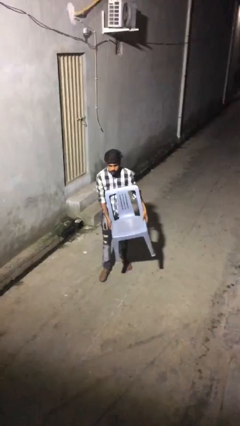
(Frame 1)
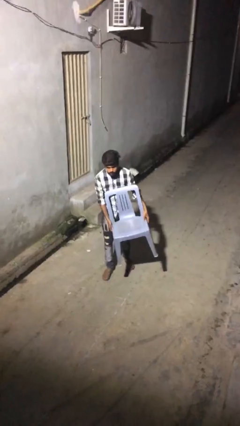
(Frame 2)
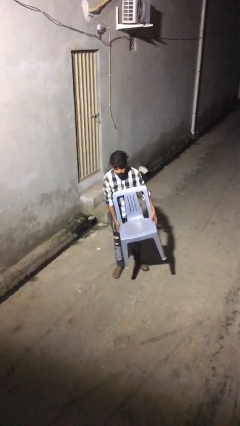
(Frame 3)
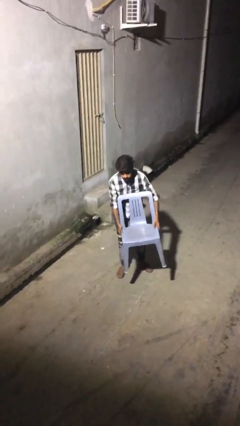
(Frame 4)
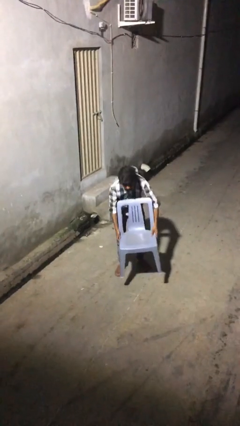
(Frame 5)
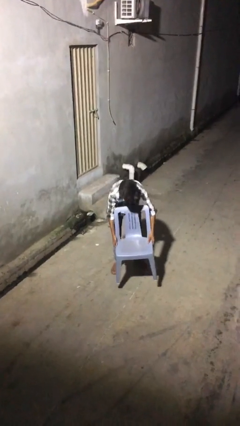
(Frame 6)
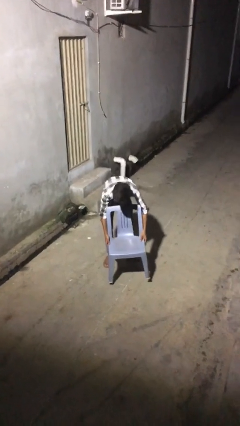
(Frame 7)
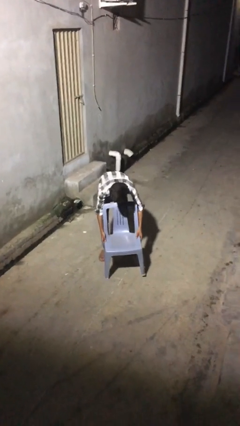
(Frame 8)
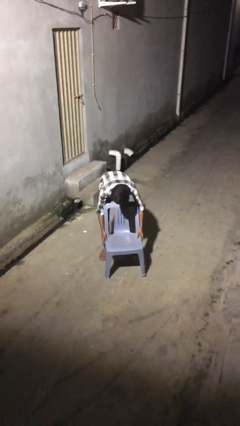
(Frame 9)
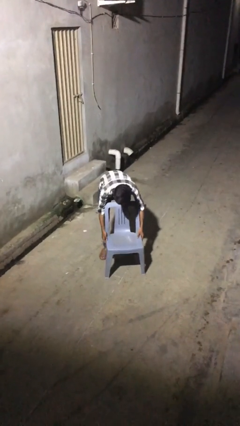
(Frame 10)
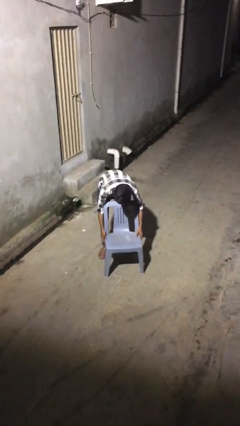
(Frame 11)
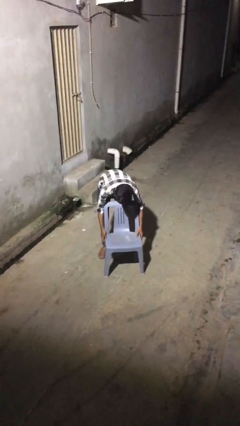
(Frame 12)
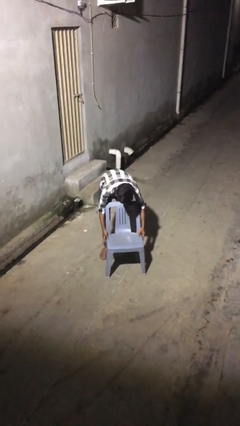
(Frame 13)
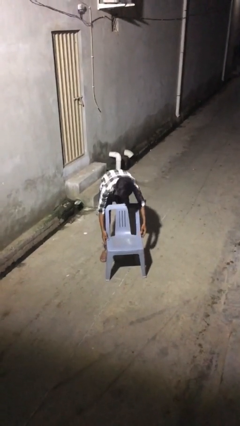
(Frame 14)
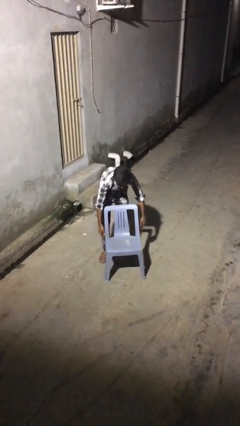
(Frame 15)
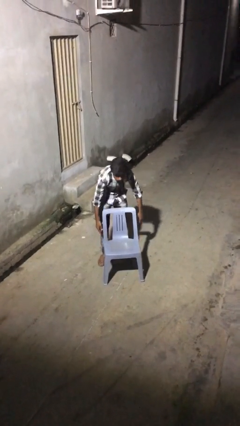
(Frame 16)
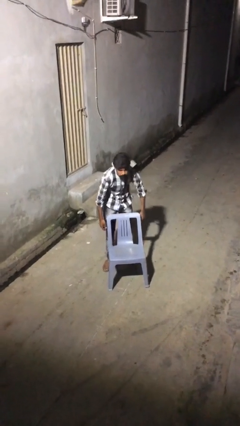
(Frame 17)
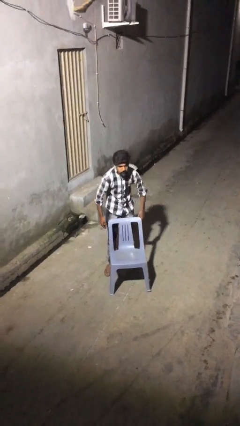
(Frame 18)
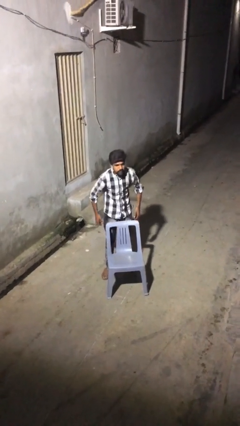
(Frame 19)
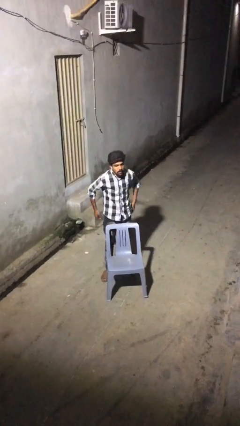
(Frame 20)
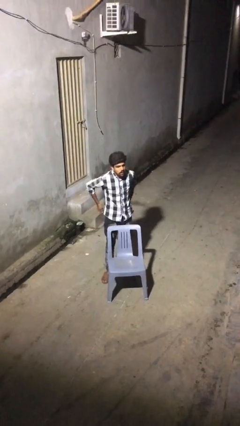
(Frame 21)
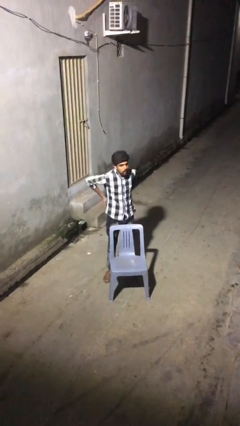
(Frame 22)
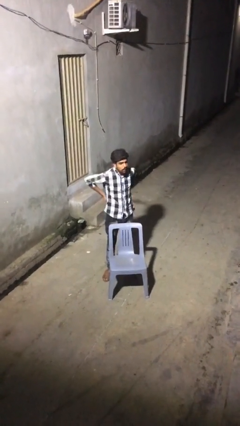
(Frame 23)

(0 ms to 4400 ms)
person puts down object on floor

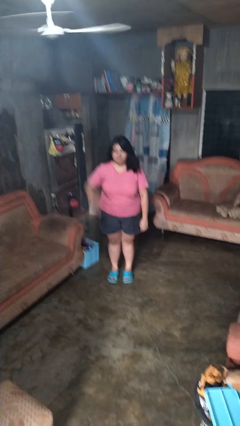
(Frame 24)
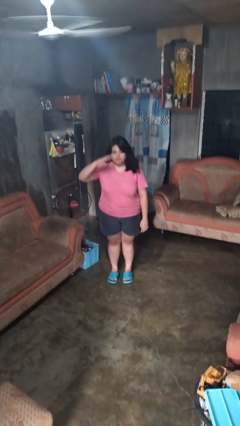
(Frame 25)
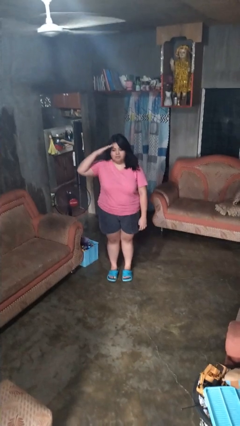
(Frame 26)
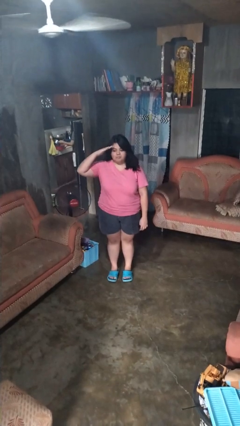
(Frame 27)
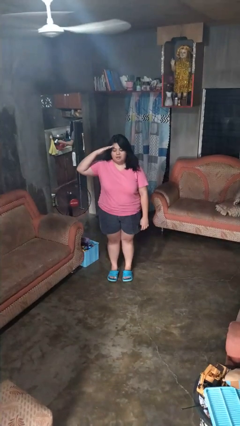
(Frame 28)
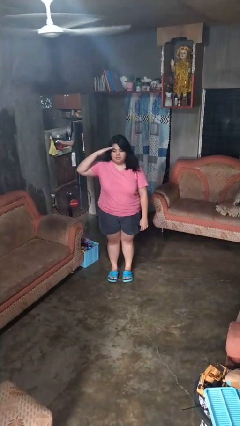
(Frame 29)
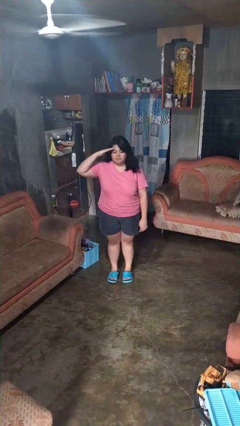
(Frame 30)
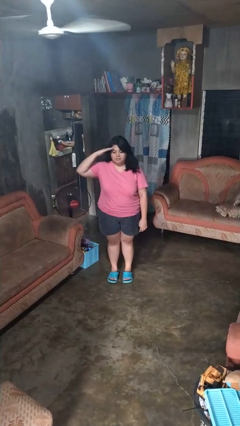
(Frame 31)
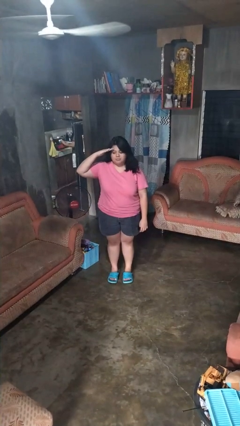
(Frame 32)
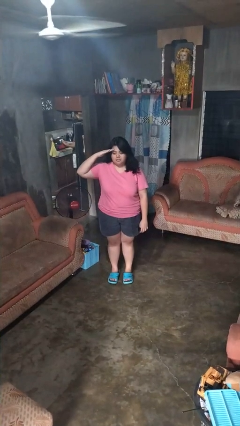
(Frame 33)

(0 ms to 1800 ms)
person salutes

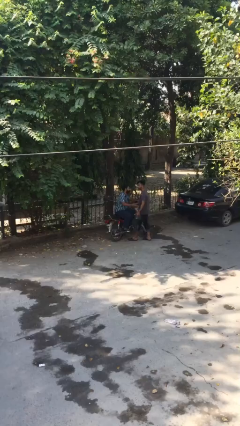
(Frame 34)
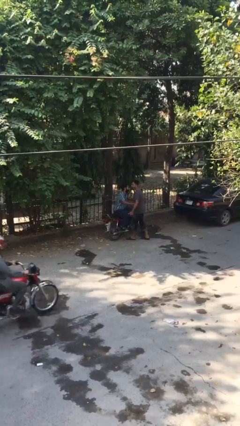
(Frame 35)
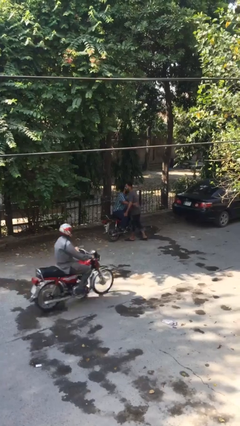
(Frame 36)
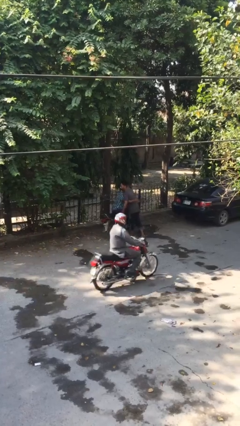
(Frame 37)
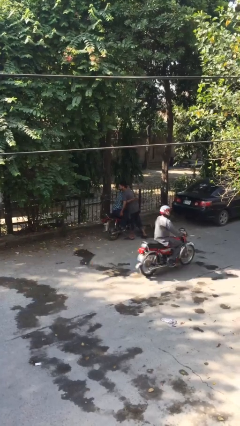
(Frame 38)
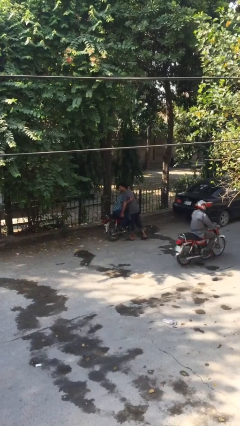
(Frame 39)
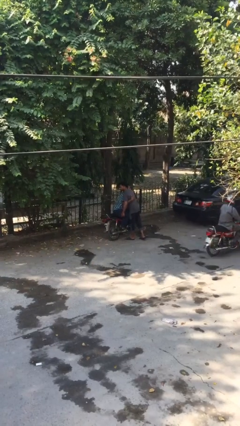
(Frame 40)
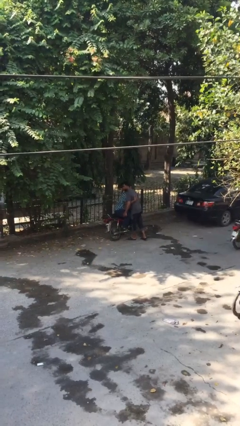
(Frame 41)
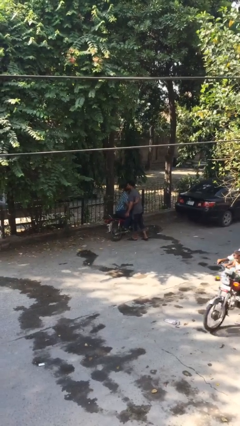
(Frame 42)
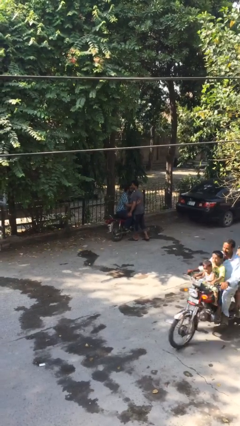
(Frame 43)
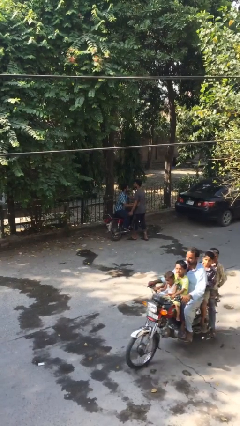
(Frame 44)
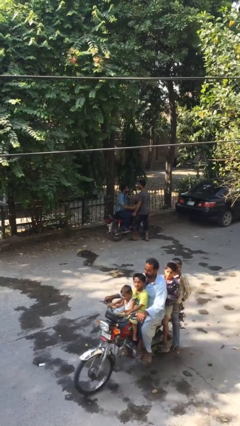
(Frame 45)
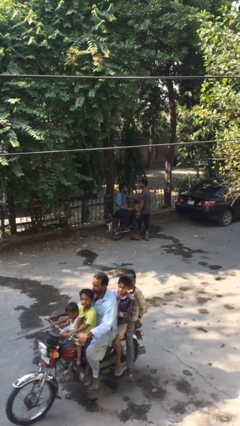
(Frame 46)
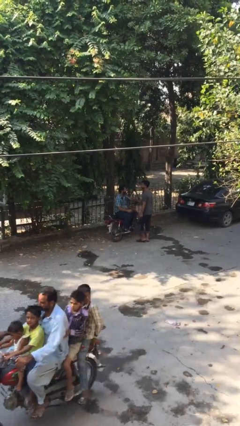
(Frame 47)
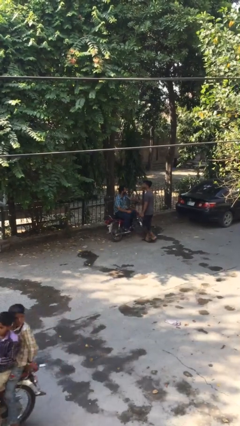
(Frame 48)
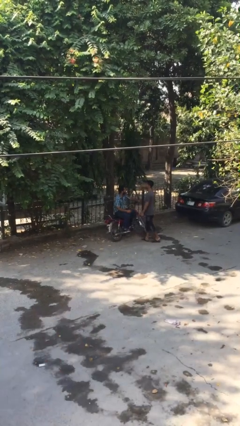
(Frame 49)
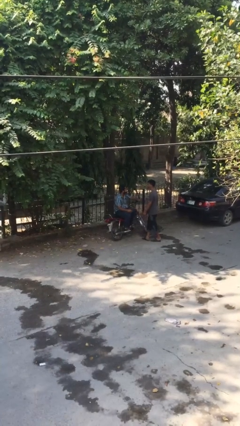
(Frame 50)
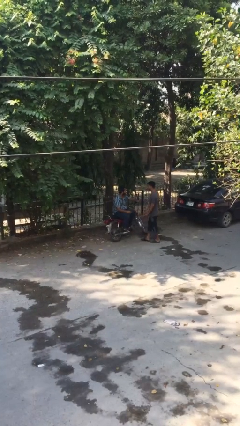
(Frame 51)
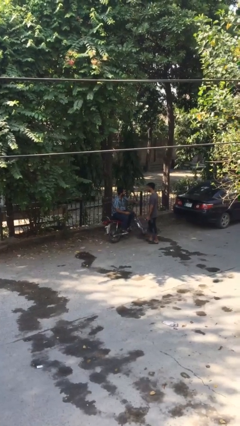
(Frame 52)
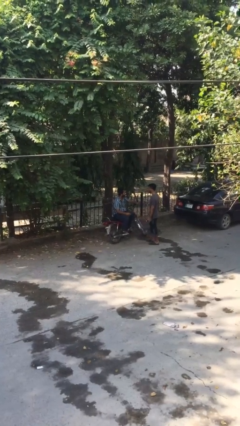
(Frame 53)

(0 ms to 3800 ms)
person embraces person

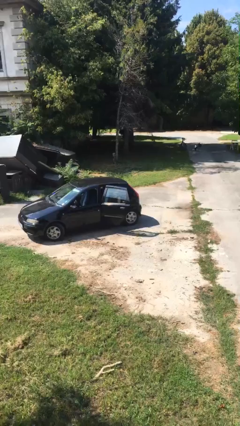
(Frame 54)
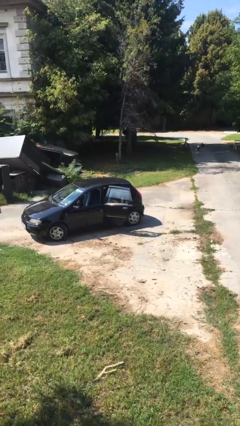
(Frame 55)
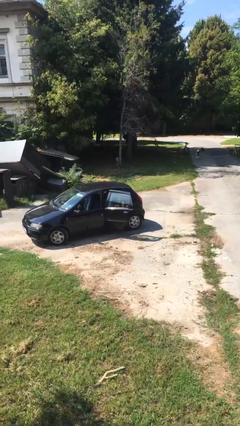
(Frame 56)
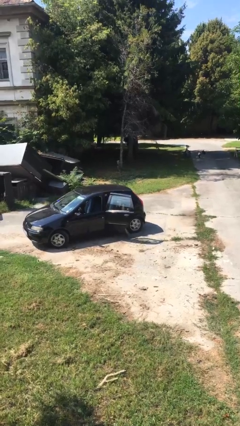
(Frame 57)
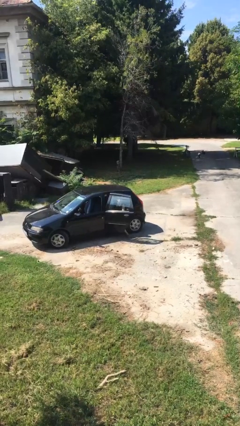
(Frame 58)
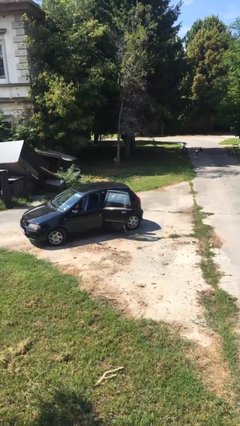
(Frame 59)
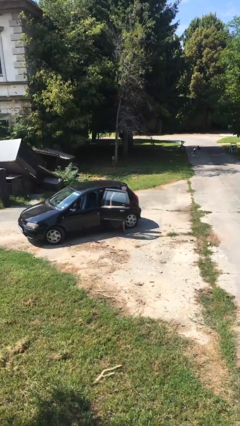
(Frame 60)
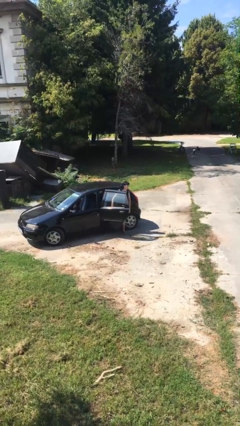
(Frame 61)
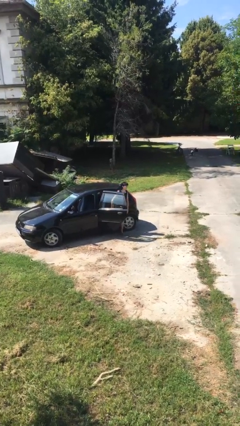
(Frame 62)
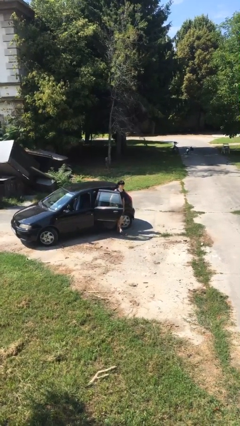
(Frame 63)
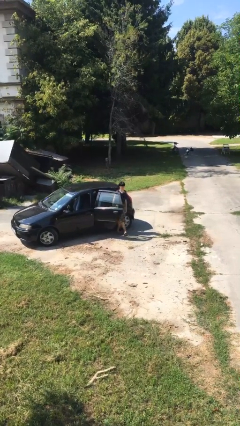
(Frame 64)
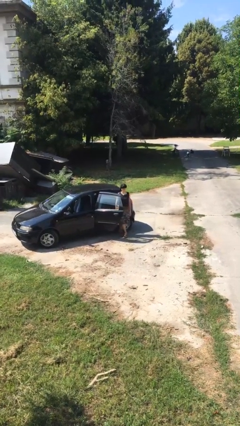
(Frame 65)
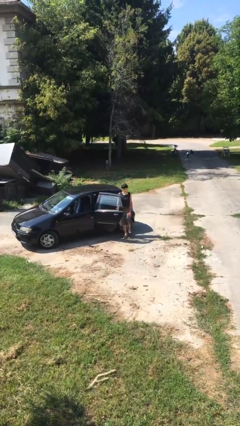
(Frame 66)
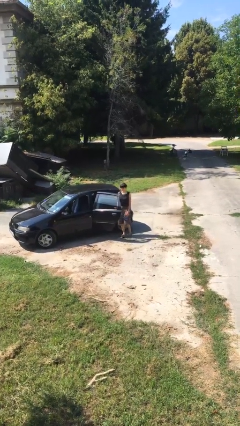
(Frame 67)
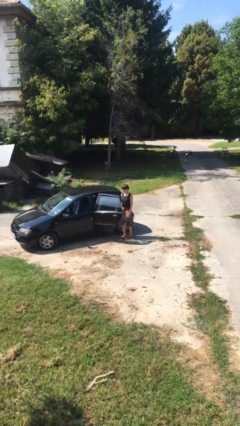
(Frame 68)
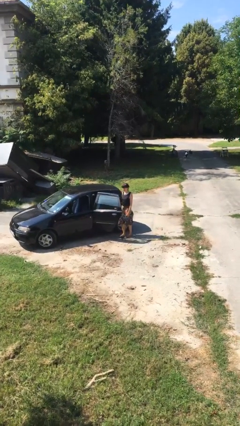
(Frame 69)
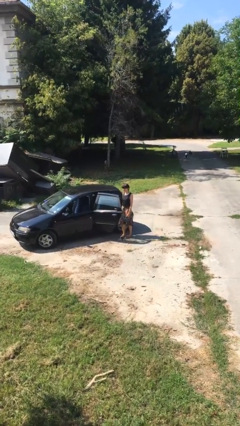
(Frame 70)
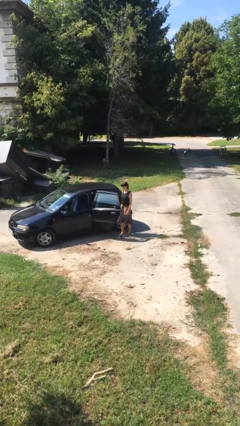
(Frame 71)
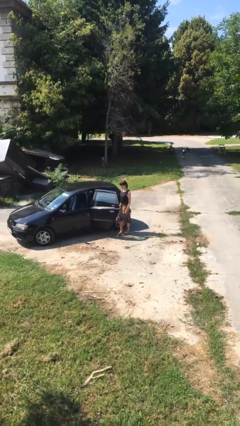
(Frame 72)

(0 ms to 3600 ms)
person exits car

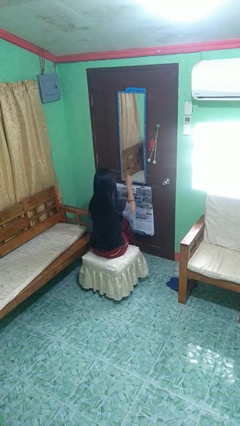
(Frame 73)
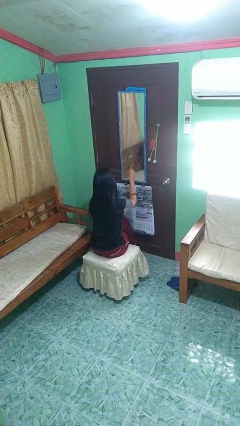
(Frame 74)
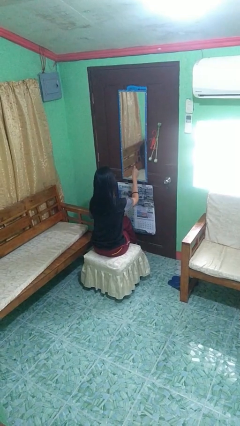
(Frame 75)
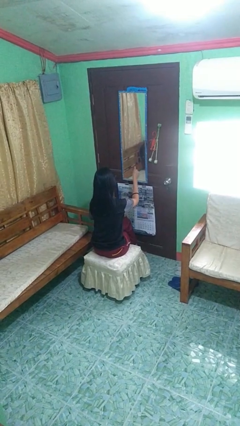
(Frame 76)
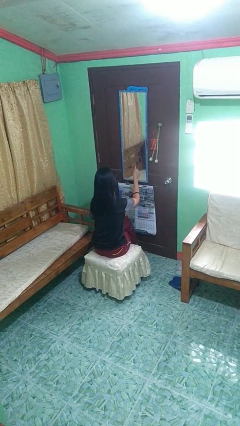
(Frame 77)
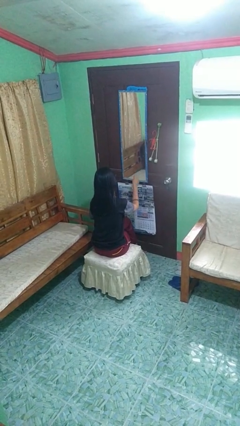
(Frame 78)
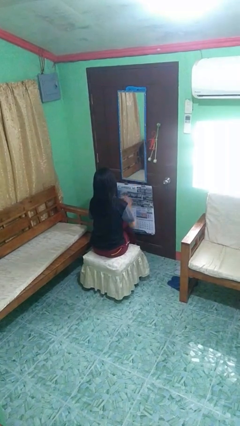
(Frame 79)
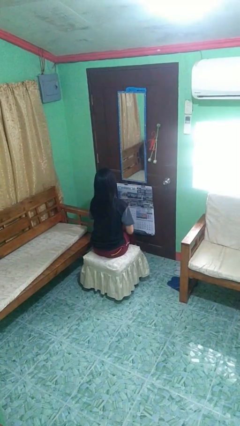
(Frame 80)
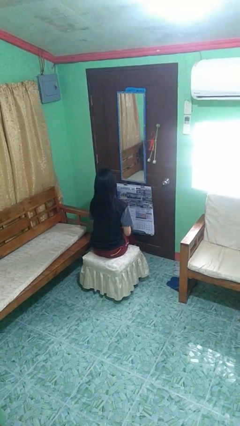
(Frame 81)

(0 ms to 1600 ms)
person gestures thumbs up

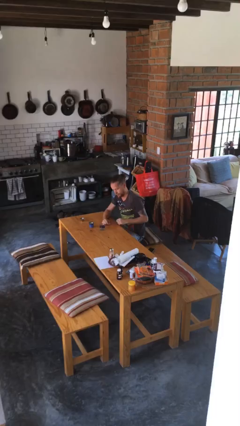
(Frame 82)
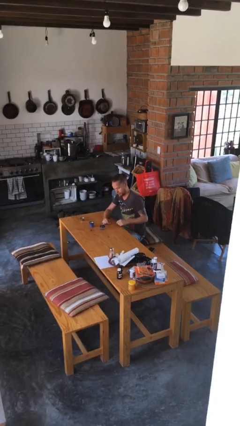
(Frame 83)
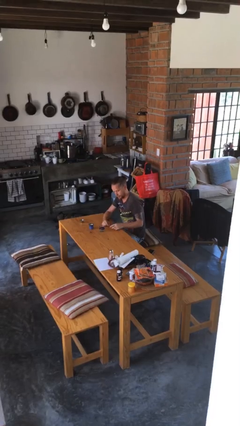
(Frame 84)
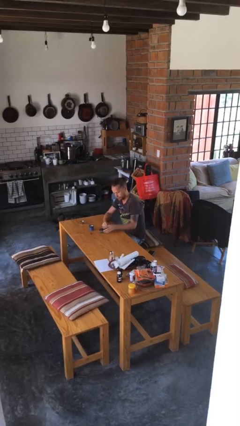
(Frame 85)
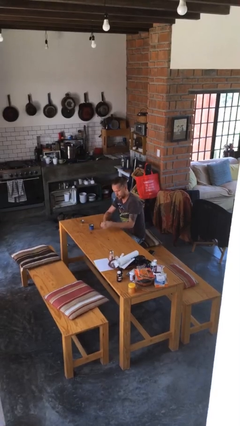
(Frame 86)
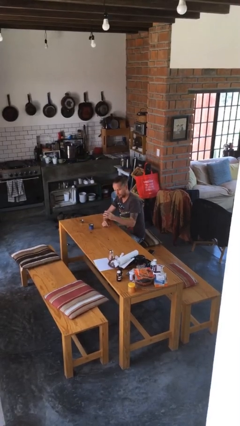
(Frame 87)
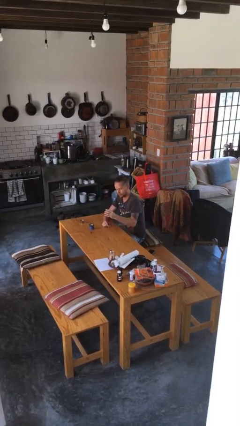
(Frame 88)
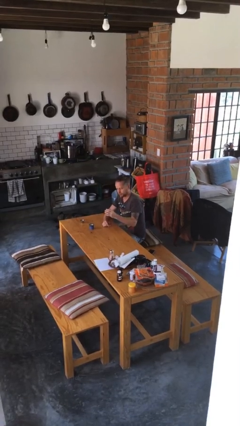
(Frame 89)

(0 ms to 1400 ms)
person picks up object from table

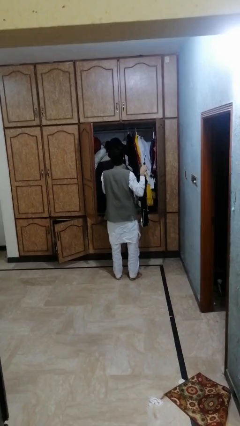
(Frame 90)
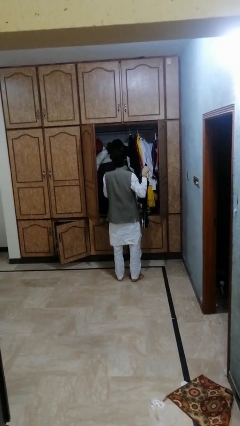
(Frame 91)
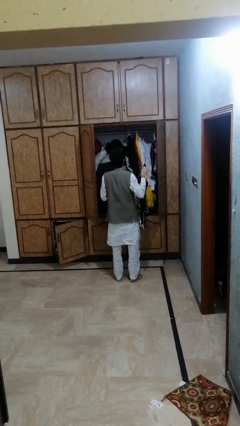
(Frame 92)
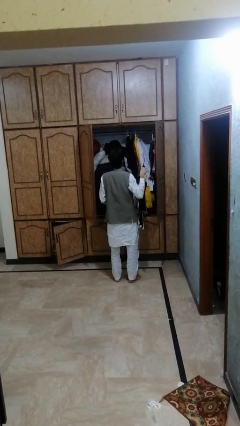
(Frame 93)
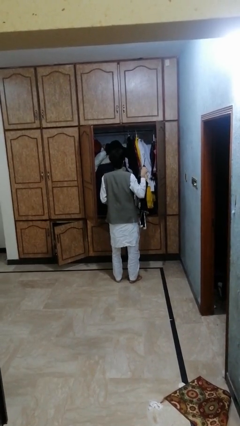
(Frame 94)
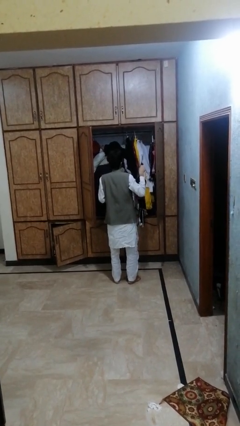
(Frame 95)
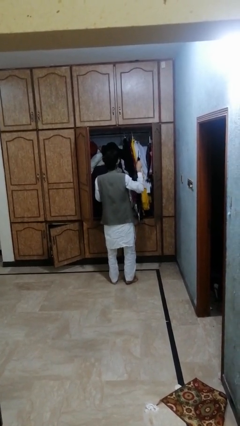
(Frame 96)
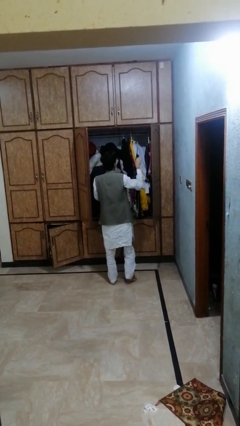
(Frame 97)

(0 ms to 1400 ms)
person puts clothes into dresser
